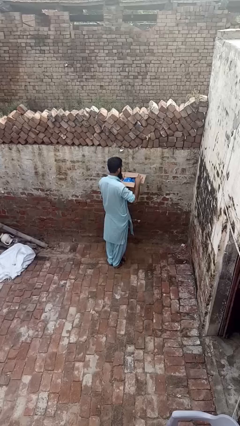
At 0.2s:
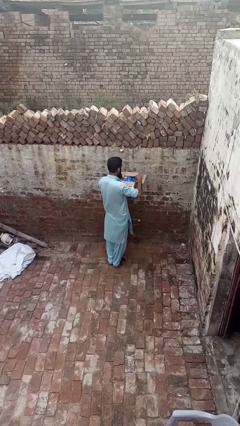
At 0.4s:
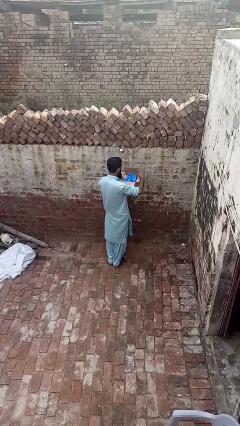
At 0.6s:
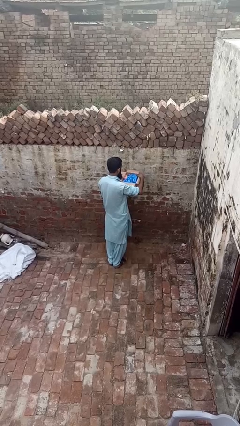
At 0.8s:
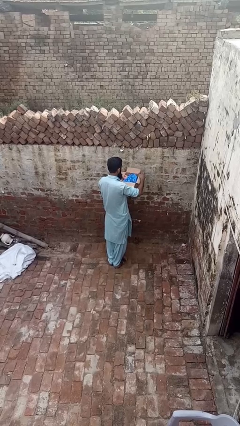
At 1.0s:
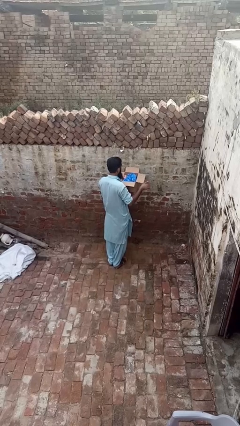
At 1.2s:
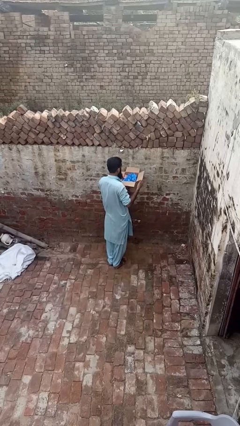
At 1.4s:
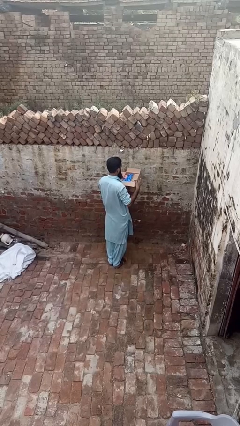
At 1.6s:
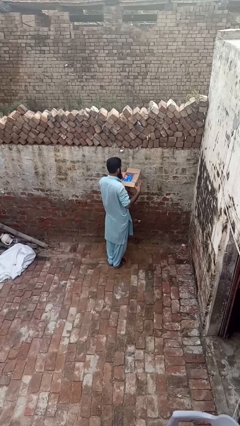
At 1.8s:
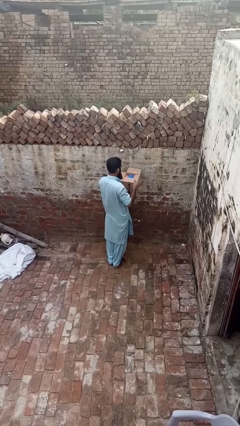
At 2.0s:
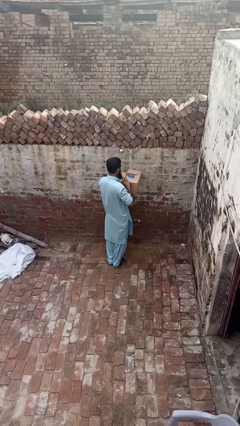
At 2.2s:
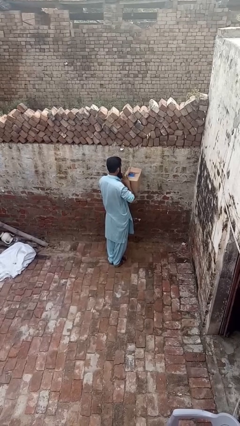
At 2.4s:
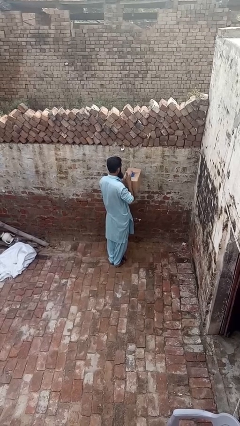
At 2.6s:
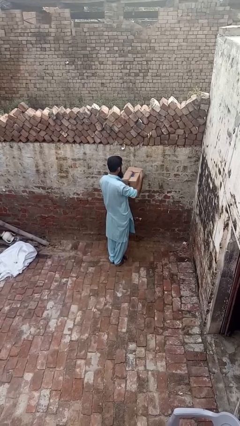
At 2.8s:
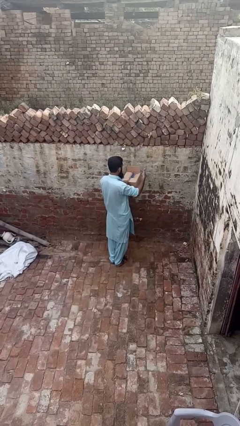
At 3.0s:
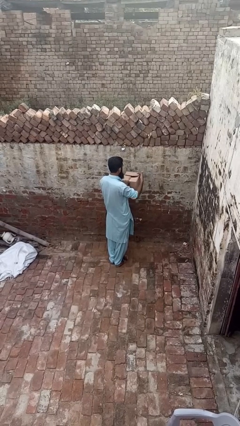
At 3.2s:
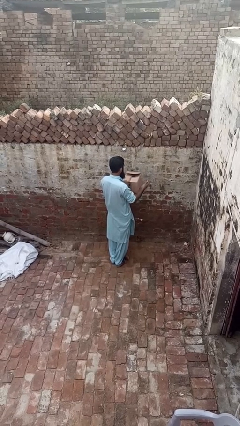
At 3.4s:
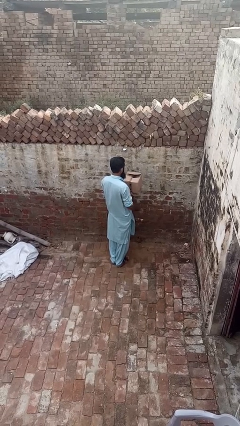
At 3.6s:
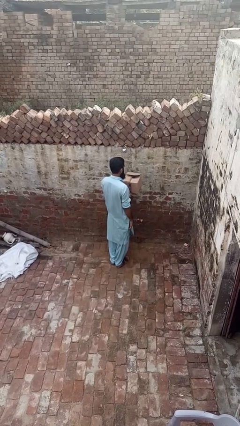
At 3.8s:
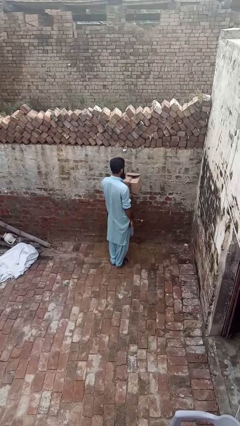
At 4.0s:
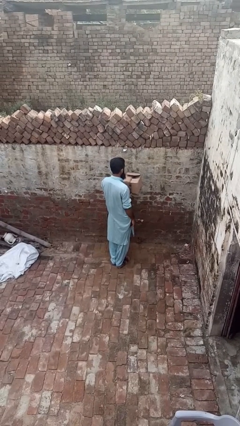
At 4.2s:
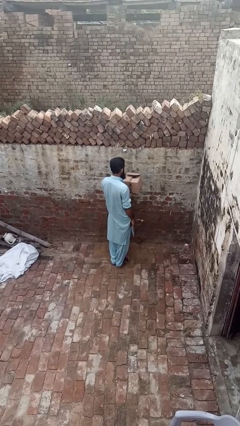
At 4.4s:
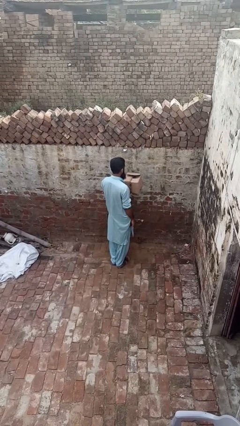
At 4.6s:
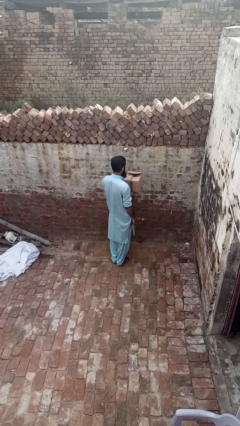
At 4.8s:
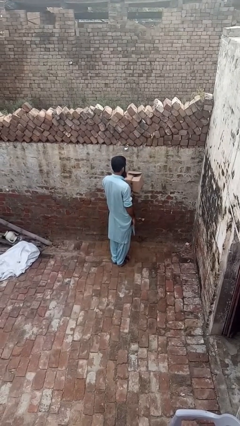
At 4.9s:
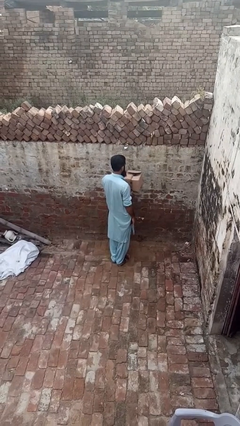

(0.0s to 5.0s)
person closes mailbox

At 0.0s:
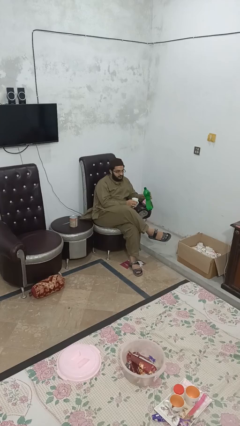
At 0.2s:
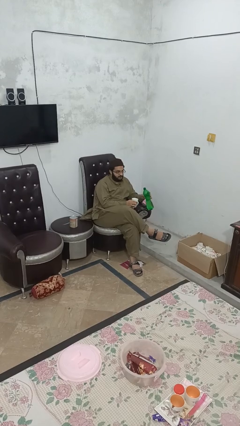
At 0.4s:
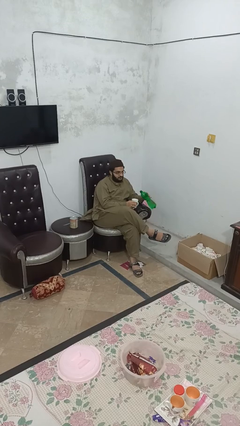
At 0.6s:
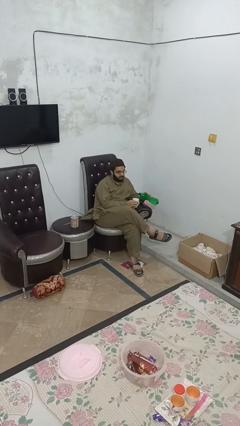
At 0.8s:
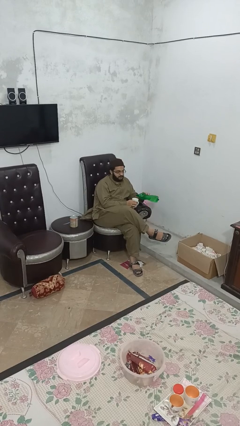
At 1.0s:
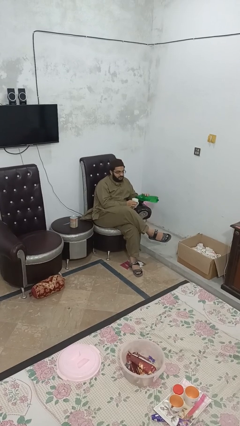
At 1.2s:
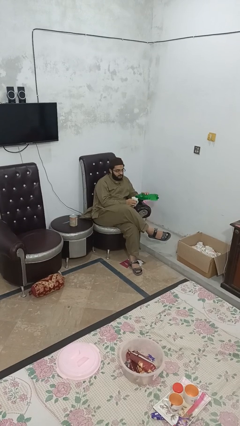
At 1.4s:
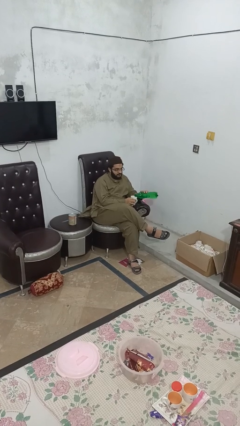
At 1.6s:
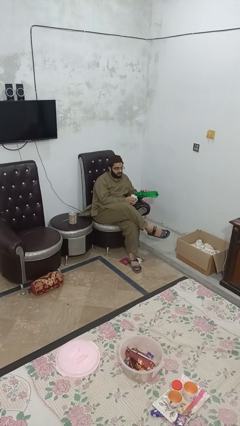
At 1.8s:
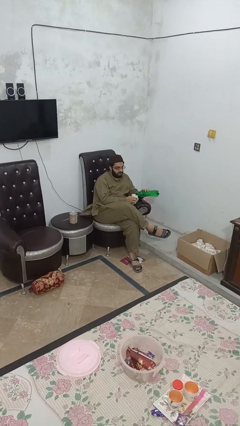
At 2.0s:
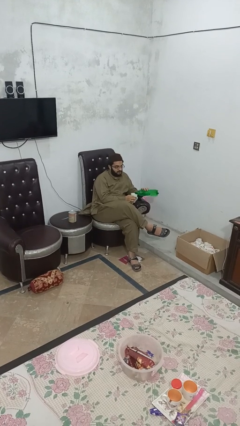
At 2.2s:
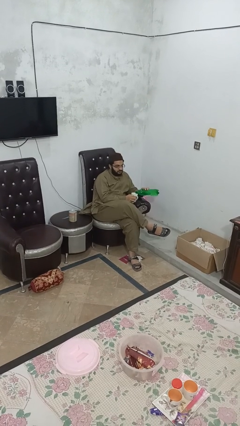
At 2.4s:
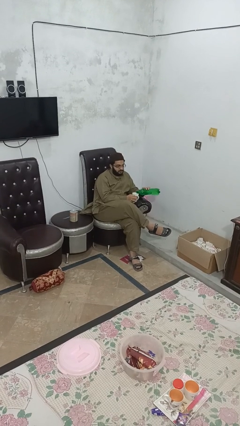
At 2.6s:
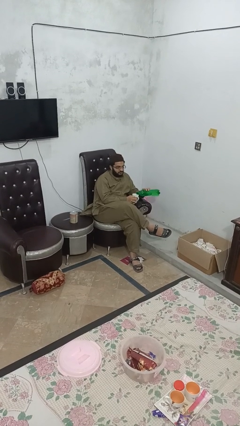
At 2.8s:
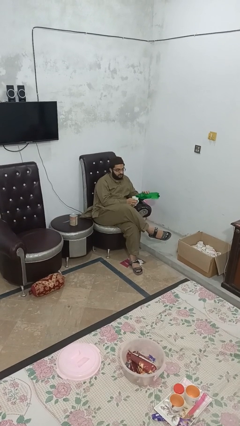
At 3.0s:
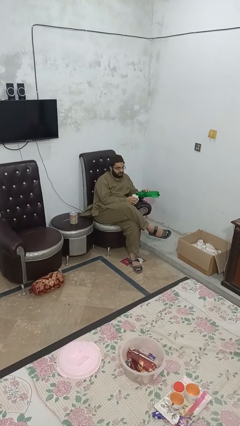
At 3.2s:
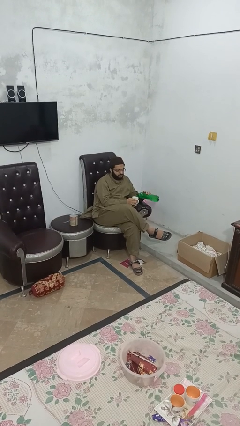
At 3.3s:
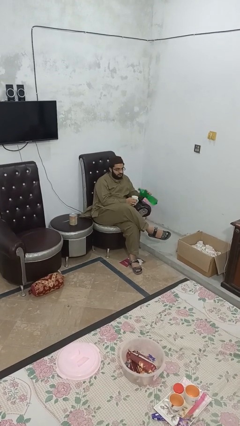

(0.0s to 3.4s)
person pours liquid into cup

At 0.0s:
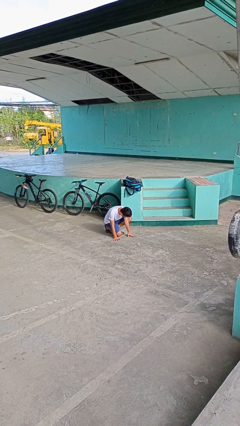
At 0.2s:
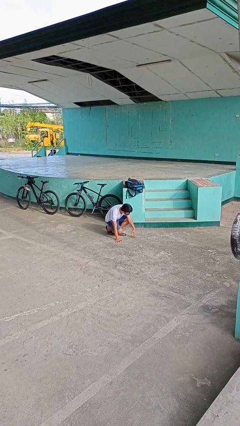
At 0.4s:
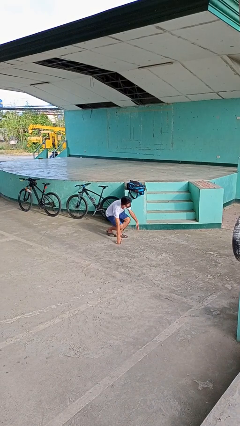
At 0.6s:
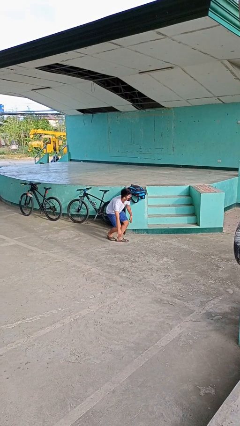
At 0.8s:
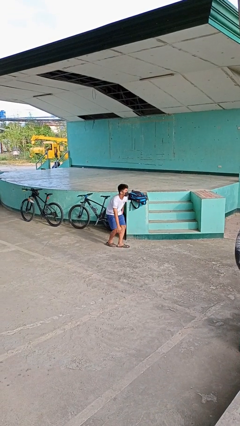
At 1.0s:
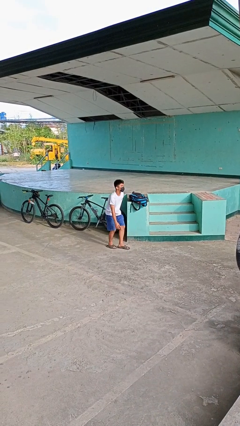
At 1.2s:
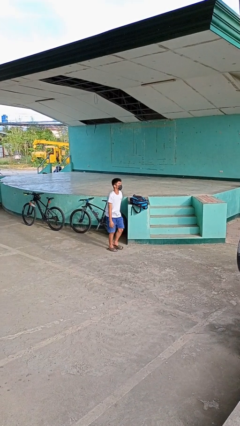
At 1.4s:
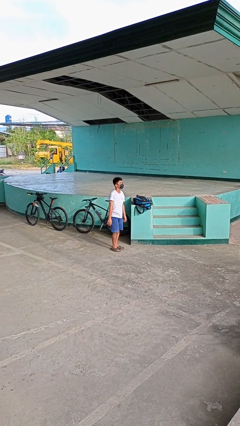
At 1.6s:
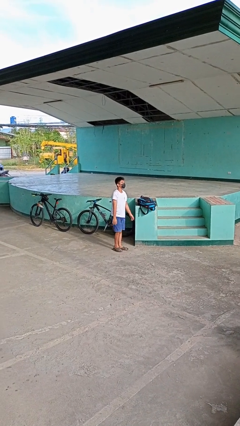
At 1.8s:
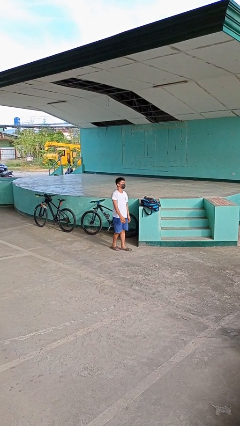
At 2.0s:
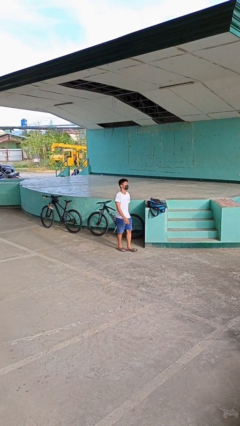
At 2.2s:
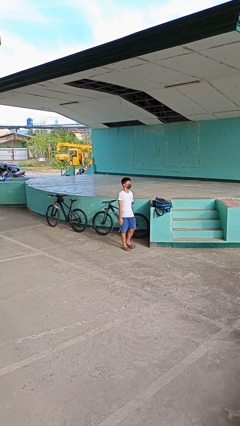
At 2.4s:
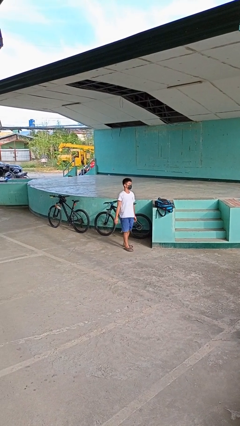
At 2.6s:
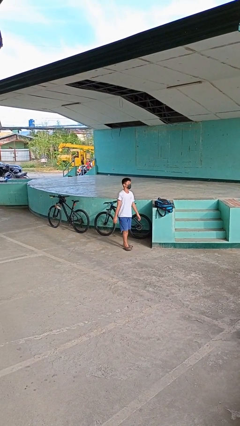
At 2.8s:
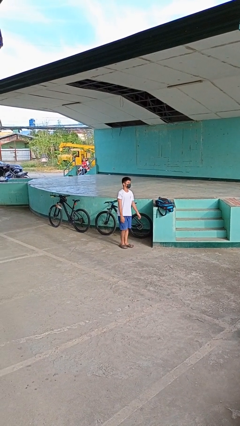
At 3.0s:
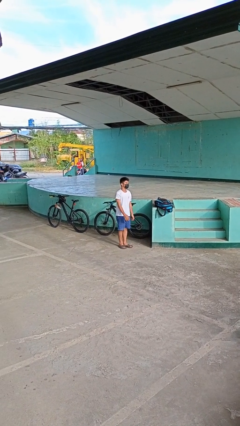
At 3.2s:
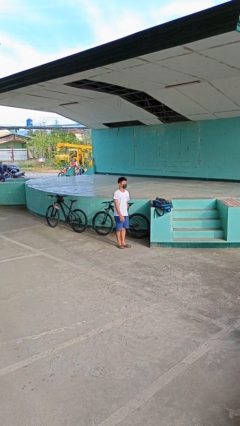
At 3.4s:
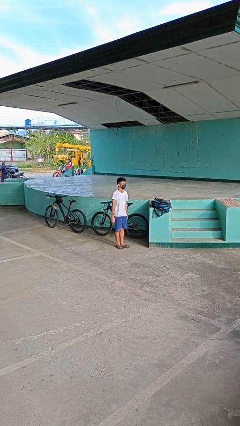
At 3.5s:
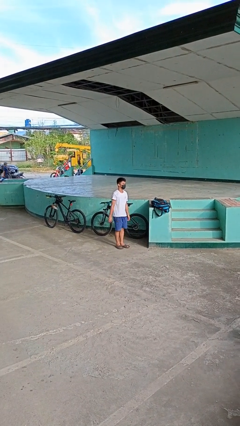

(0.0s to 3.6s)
person stands up from floor

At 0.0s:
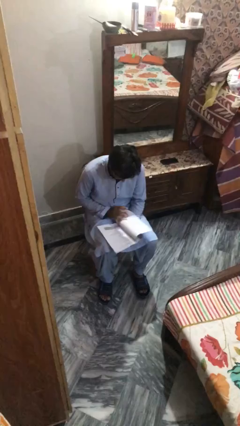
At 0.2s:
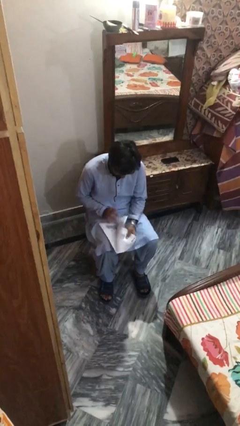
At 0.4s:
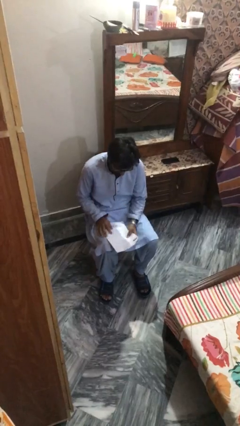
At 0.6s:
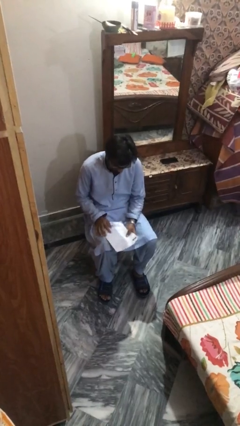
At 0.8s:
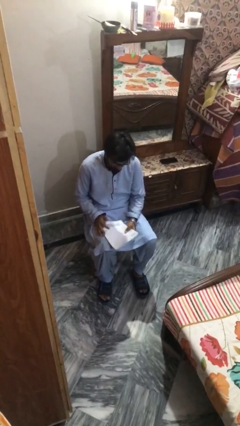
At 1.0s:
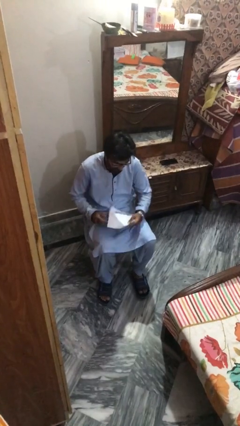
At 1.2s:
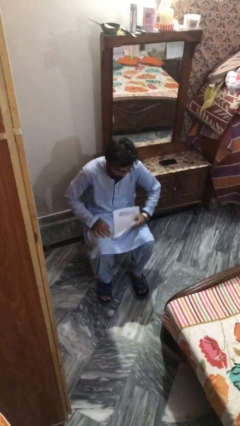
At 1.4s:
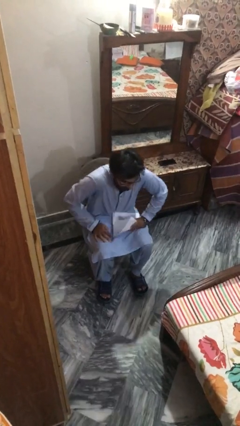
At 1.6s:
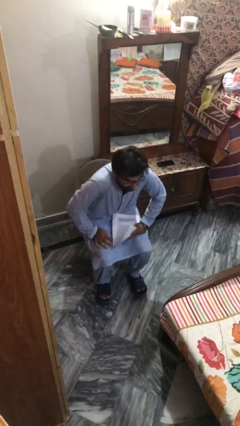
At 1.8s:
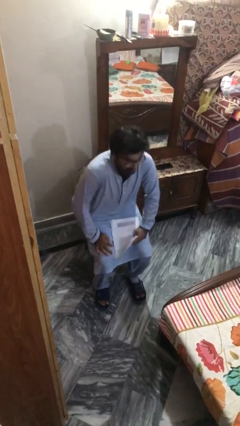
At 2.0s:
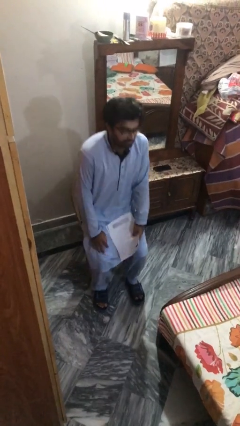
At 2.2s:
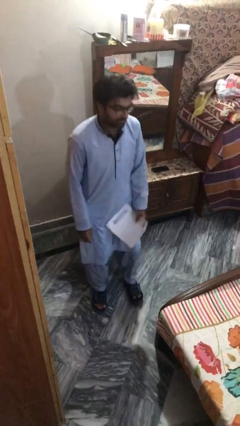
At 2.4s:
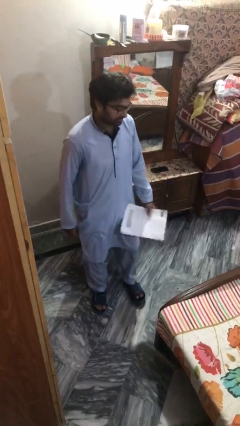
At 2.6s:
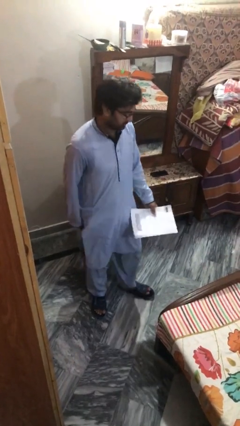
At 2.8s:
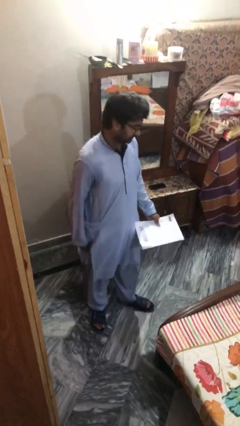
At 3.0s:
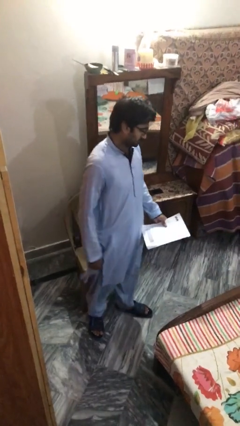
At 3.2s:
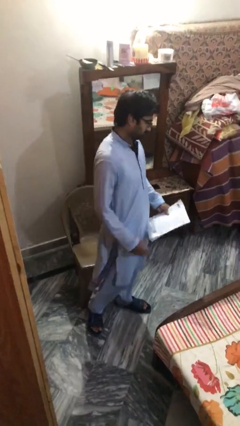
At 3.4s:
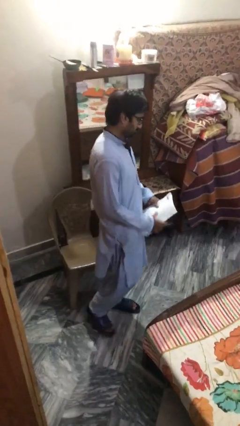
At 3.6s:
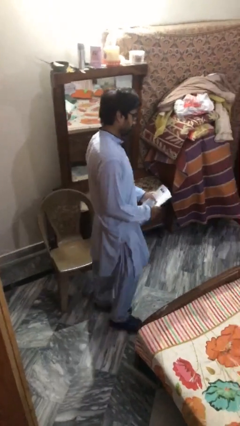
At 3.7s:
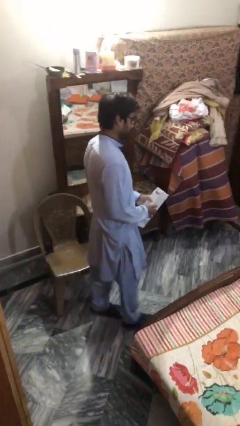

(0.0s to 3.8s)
person stands up

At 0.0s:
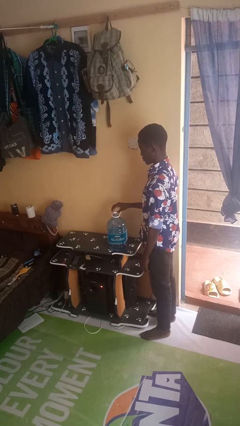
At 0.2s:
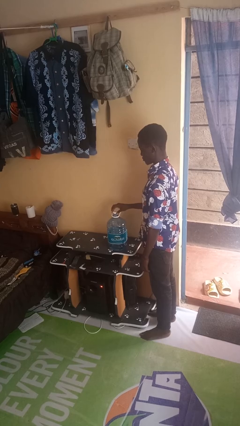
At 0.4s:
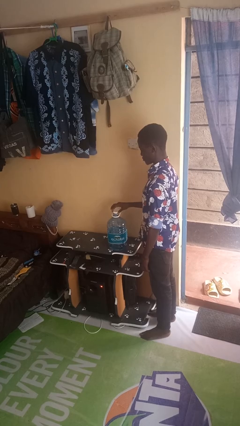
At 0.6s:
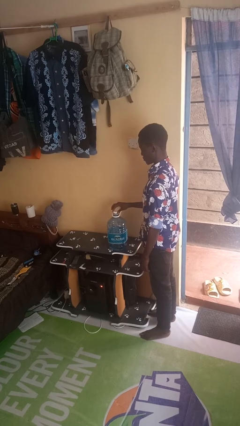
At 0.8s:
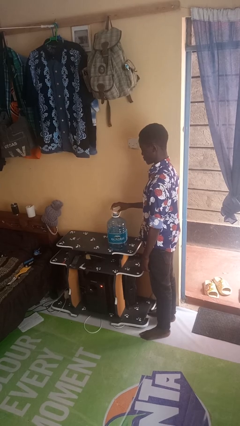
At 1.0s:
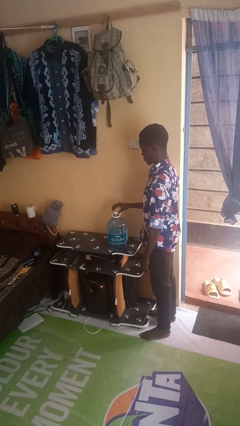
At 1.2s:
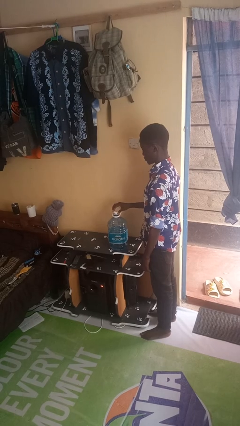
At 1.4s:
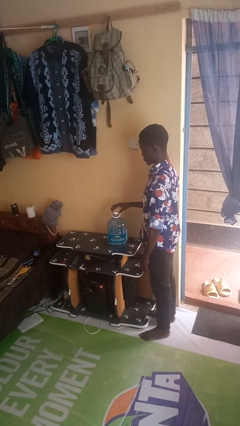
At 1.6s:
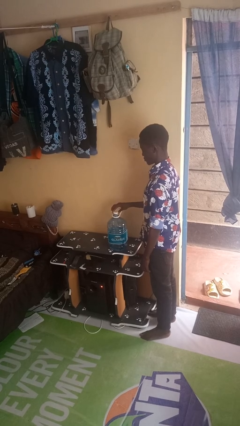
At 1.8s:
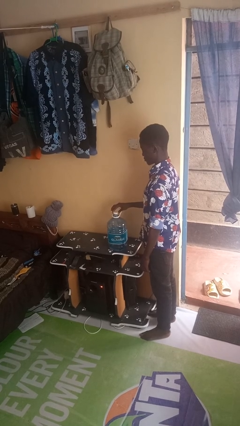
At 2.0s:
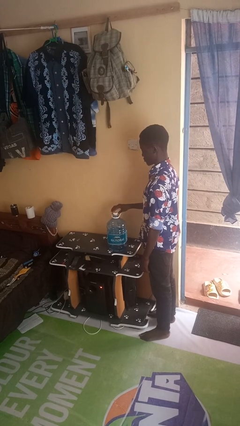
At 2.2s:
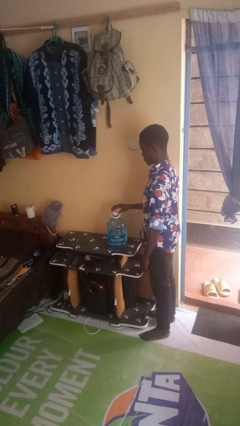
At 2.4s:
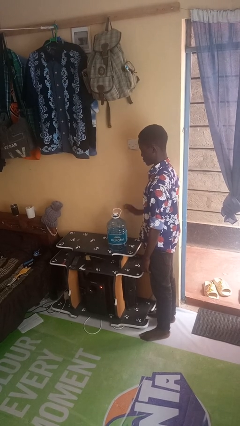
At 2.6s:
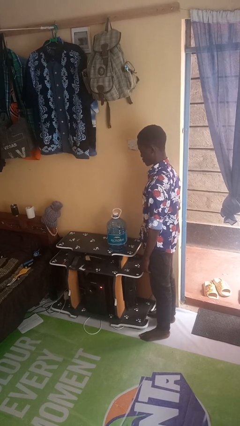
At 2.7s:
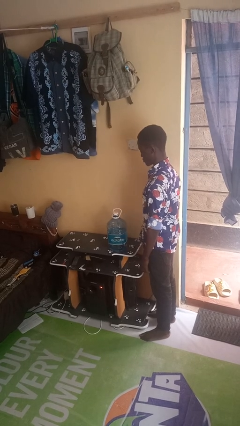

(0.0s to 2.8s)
person screws lid to bottle
